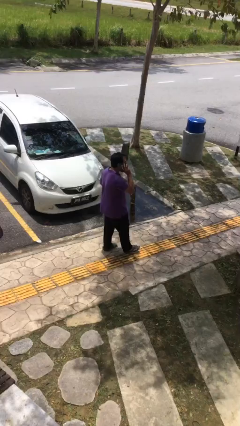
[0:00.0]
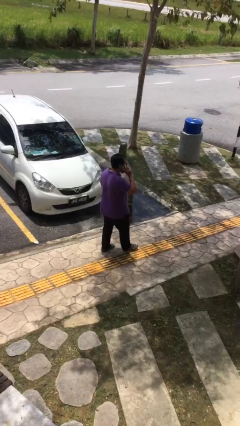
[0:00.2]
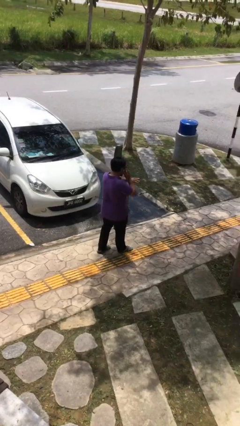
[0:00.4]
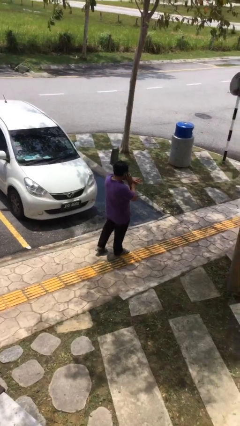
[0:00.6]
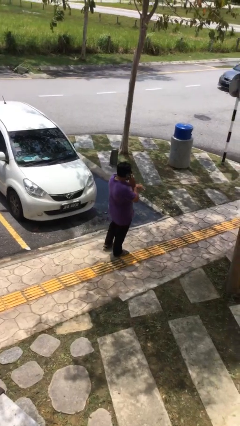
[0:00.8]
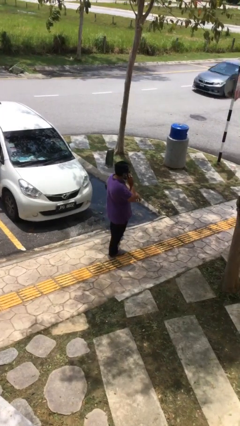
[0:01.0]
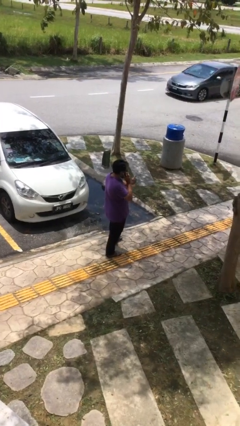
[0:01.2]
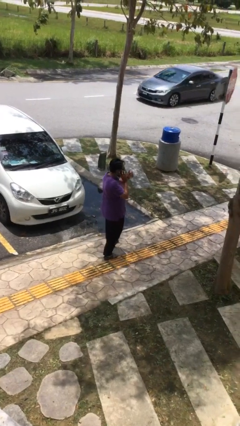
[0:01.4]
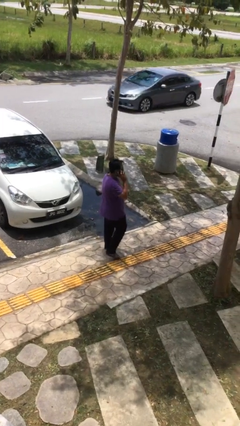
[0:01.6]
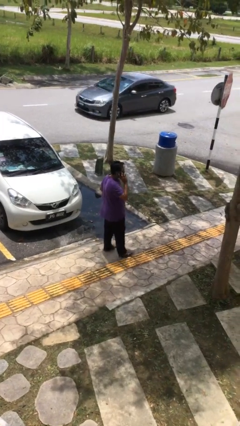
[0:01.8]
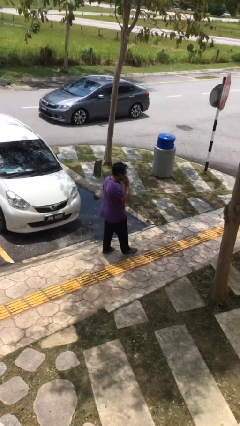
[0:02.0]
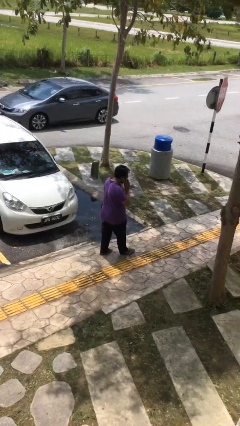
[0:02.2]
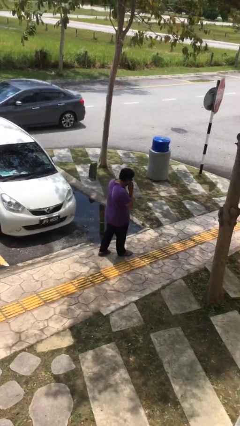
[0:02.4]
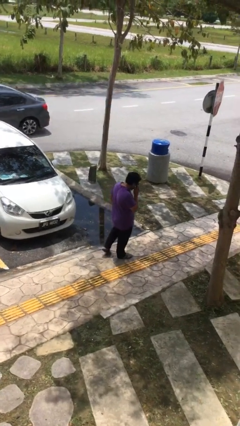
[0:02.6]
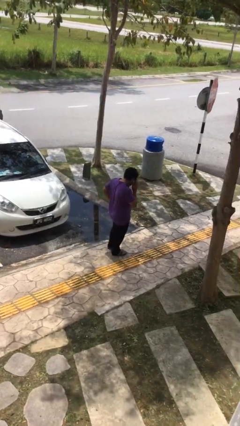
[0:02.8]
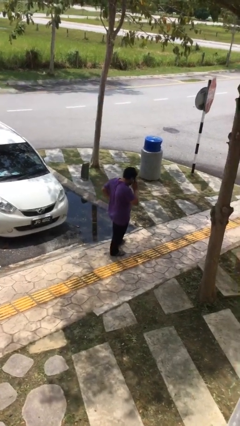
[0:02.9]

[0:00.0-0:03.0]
person talks on phone

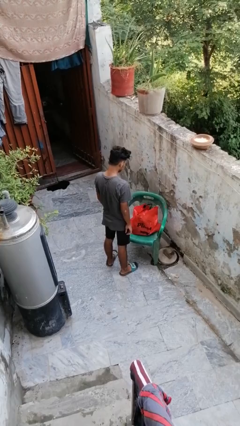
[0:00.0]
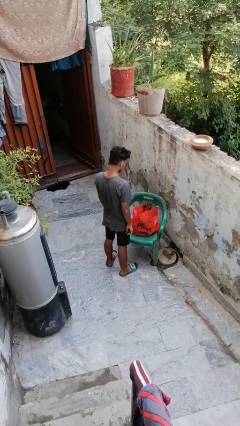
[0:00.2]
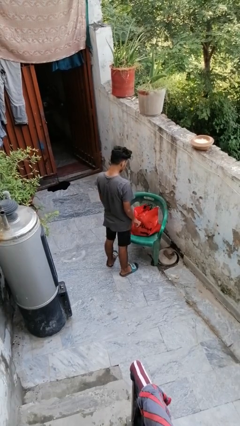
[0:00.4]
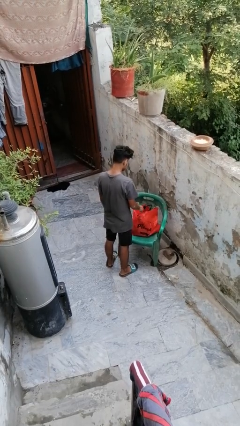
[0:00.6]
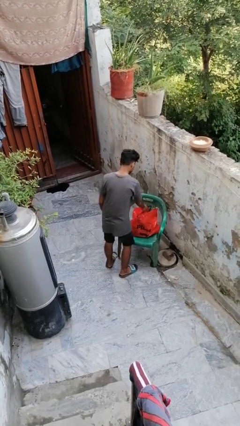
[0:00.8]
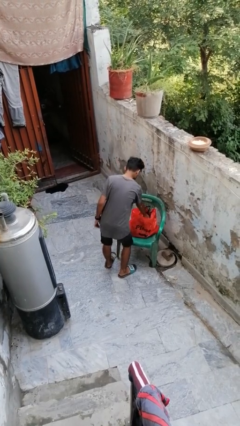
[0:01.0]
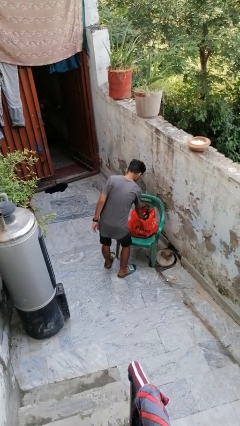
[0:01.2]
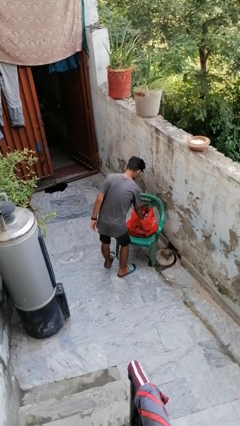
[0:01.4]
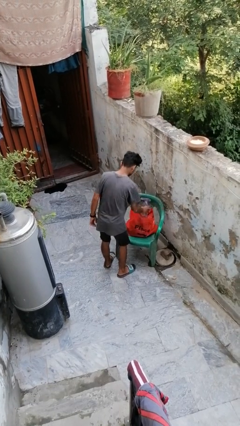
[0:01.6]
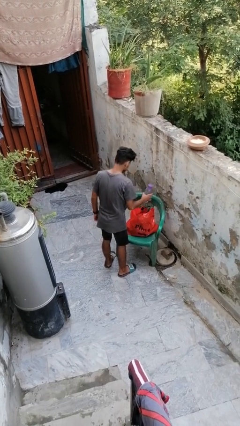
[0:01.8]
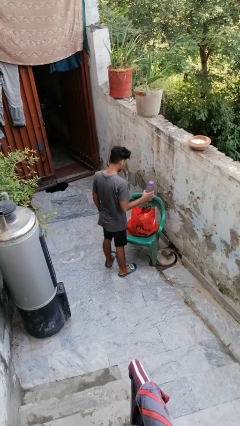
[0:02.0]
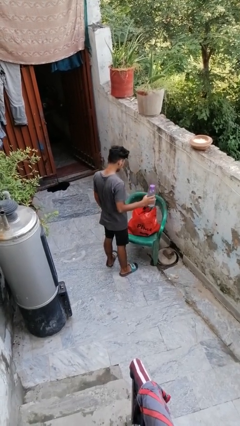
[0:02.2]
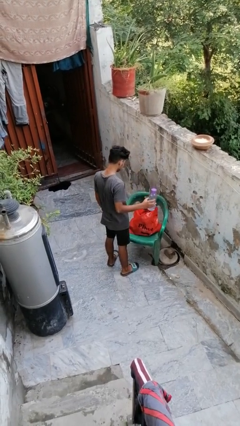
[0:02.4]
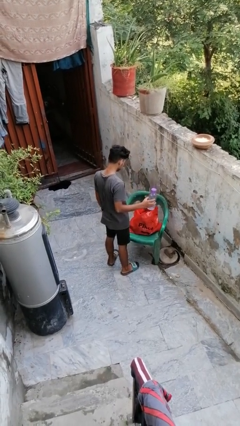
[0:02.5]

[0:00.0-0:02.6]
person takes object from bag

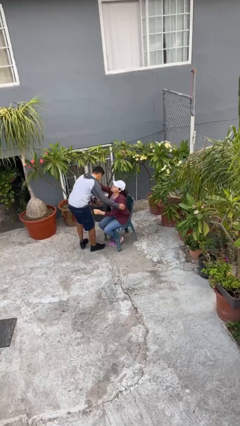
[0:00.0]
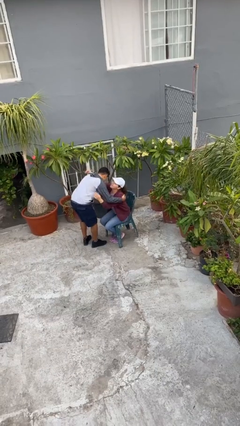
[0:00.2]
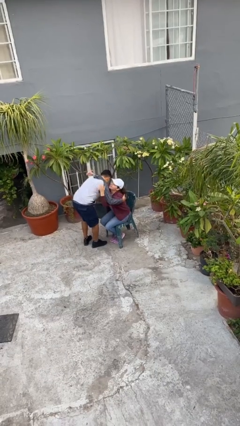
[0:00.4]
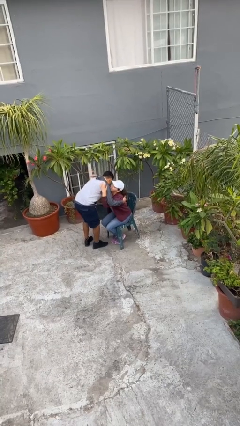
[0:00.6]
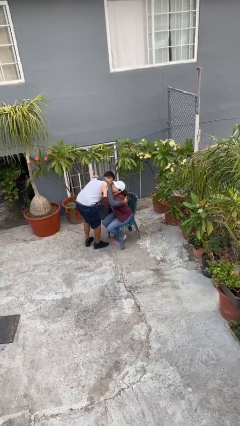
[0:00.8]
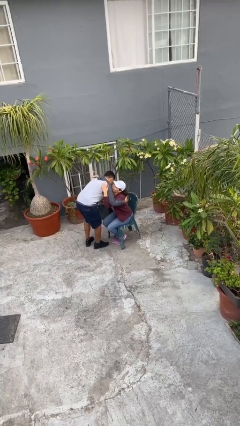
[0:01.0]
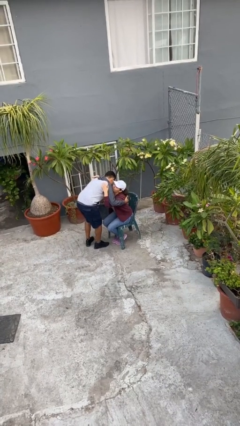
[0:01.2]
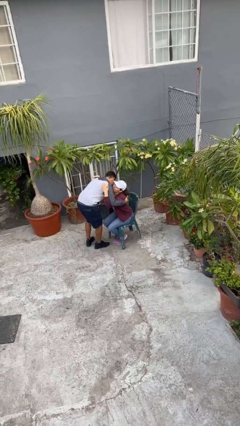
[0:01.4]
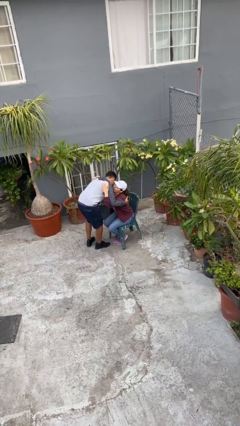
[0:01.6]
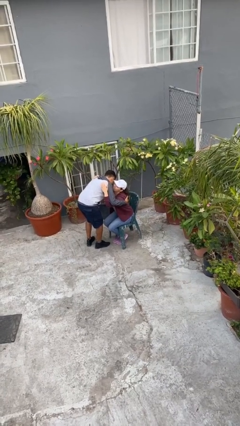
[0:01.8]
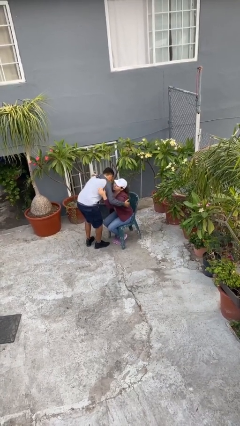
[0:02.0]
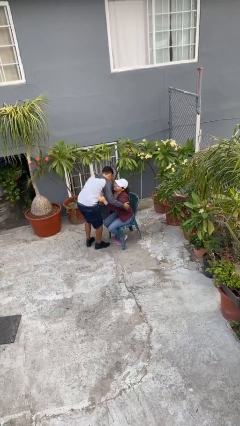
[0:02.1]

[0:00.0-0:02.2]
person embraces person

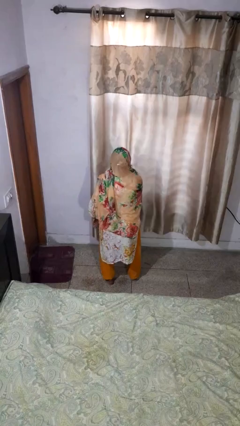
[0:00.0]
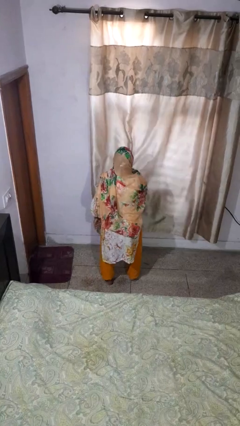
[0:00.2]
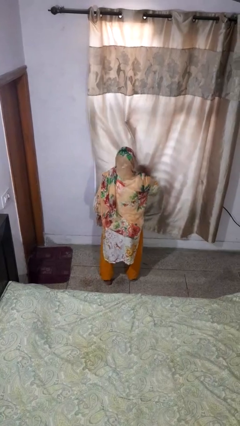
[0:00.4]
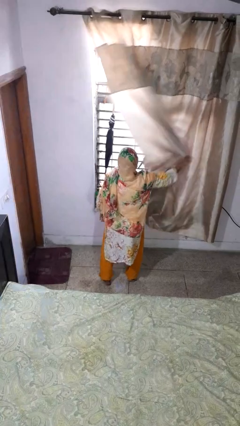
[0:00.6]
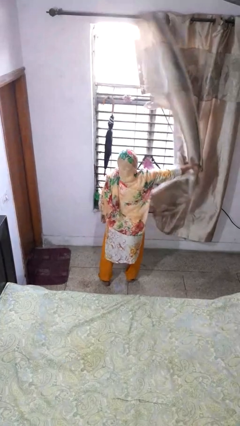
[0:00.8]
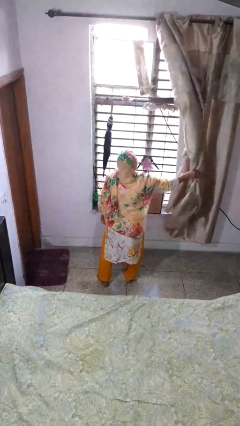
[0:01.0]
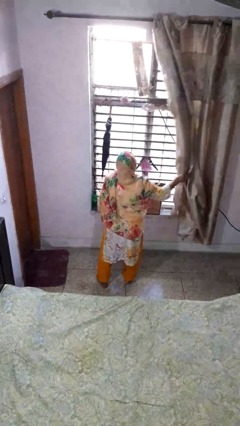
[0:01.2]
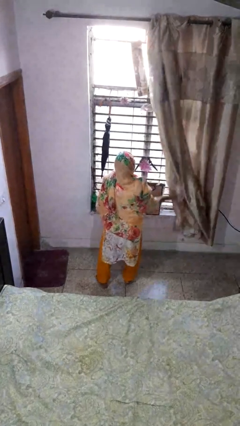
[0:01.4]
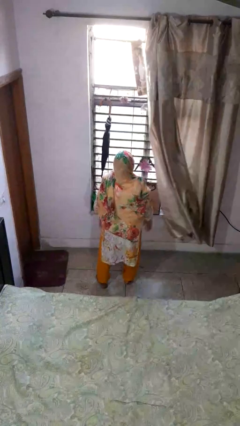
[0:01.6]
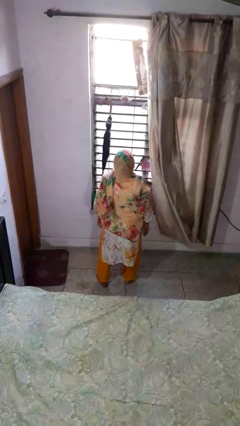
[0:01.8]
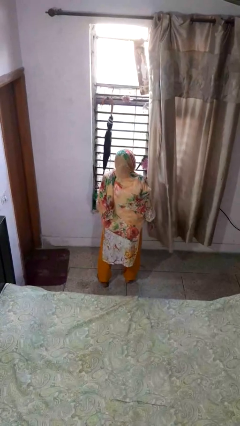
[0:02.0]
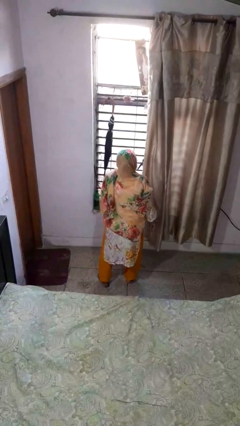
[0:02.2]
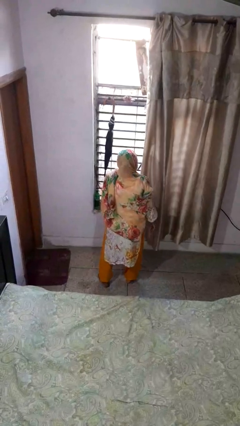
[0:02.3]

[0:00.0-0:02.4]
person opens curtains

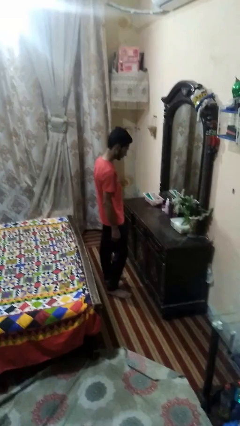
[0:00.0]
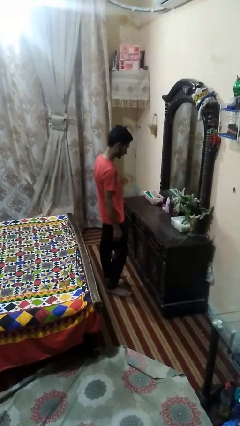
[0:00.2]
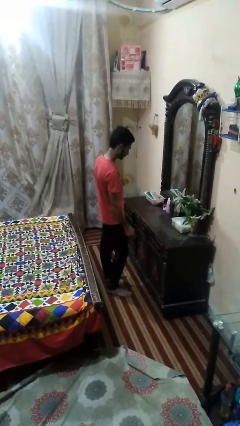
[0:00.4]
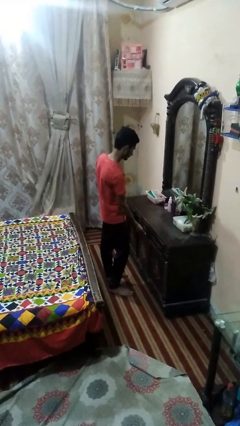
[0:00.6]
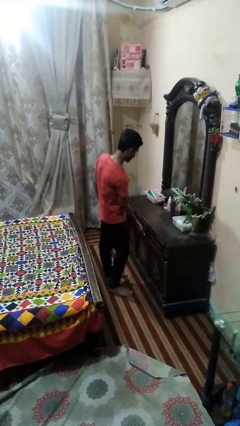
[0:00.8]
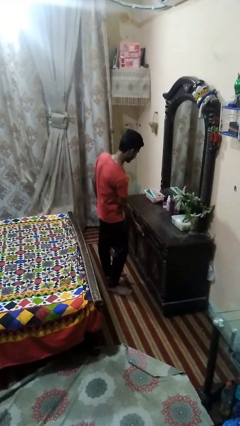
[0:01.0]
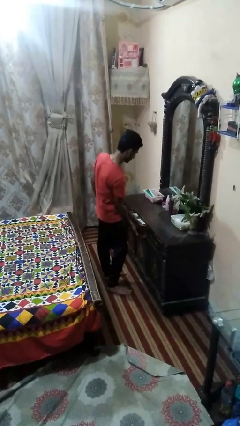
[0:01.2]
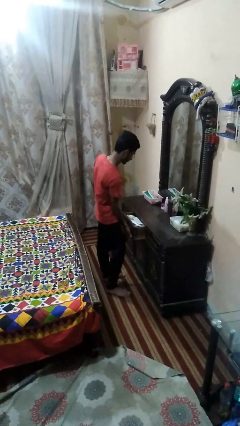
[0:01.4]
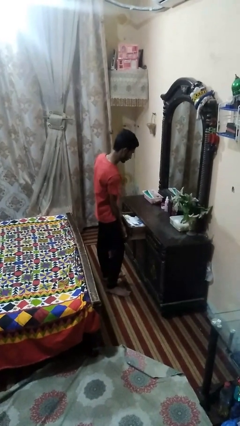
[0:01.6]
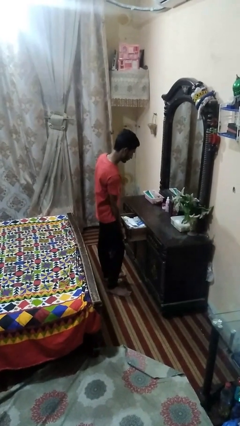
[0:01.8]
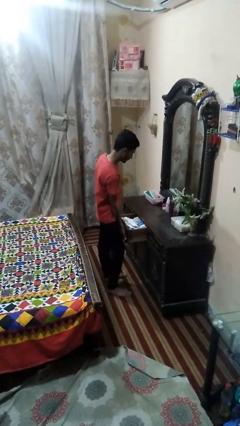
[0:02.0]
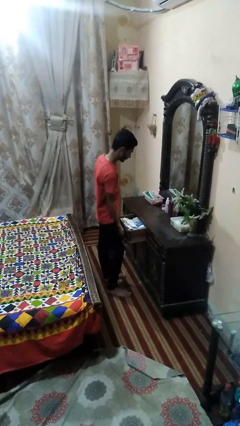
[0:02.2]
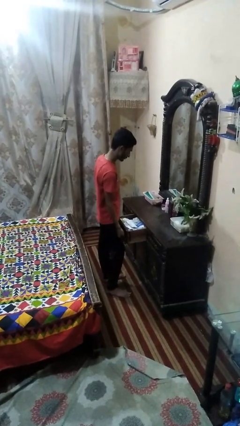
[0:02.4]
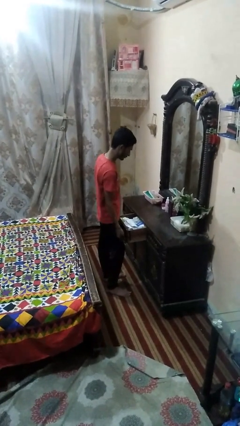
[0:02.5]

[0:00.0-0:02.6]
person opens dresser drawer

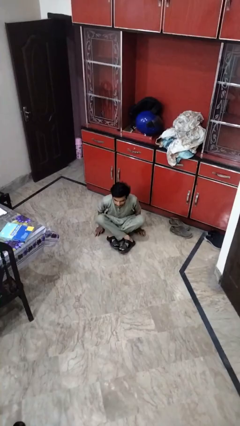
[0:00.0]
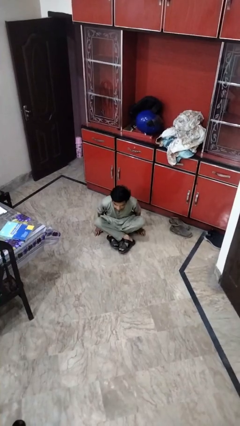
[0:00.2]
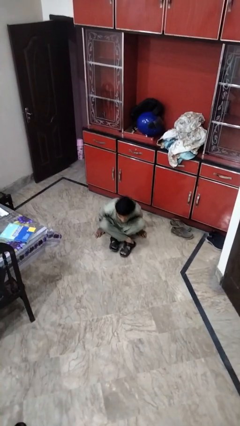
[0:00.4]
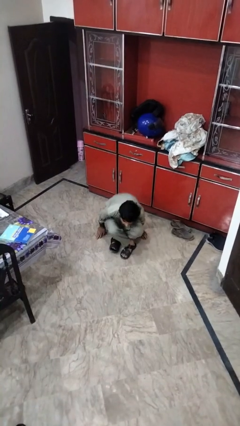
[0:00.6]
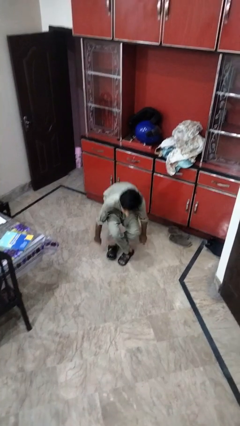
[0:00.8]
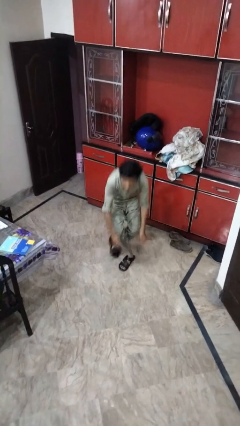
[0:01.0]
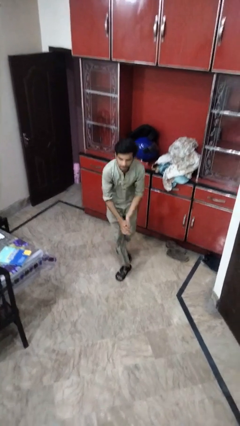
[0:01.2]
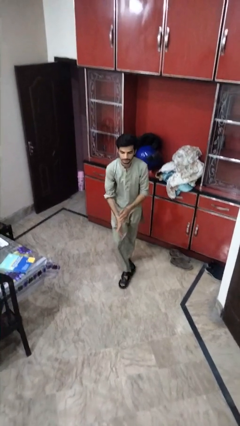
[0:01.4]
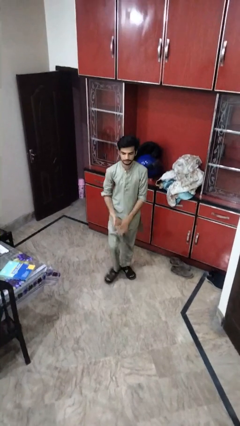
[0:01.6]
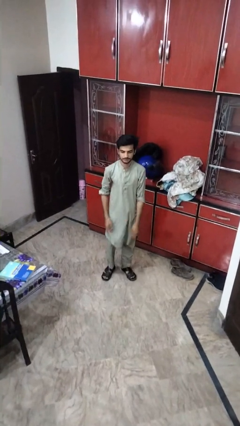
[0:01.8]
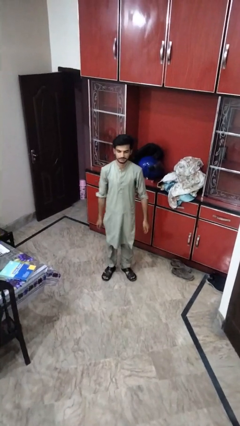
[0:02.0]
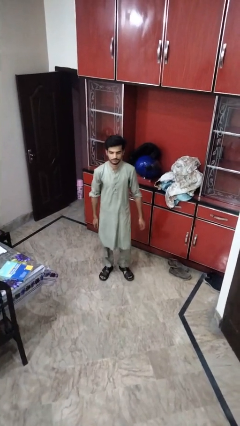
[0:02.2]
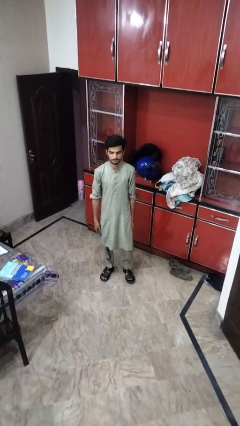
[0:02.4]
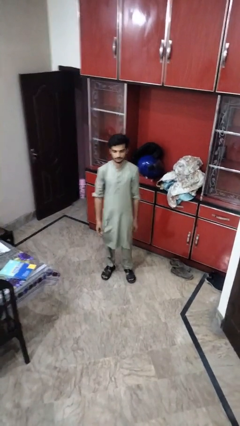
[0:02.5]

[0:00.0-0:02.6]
person stands up from floor

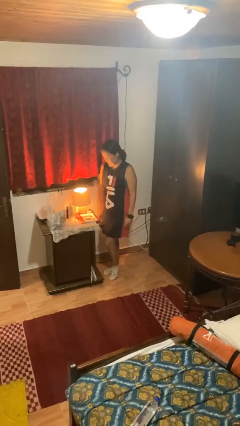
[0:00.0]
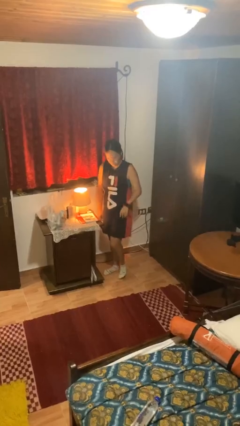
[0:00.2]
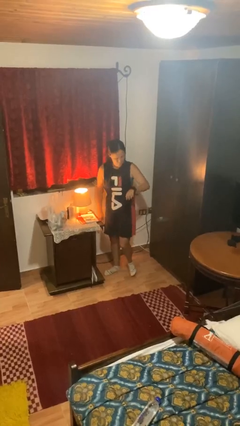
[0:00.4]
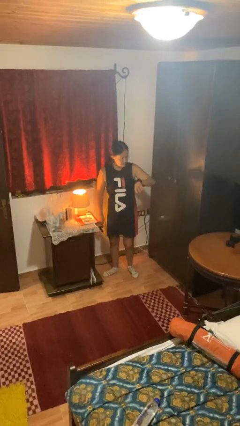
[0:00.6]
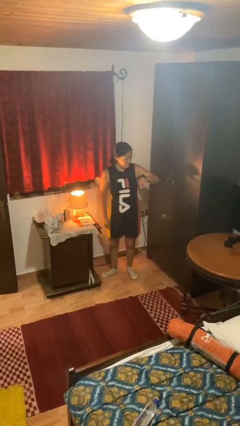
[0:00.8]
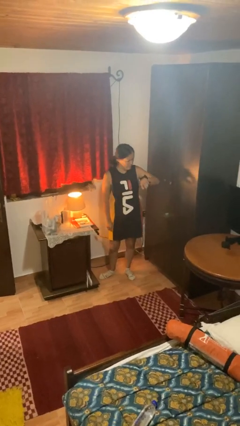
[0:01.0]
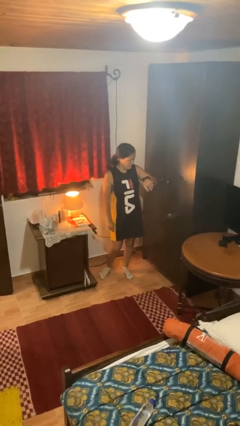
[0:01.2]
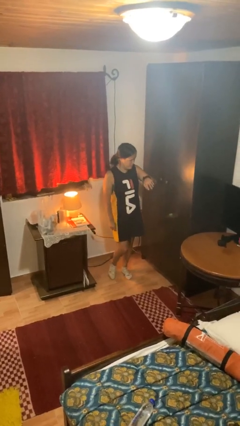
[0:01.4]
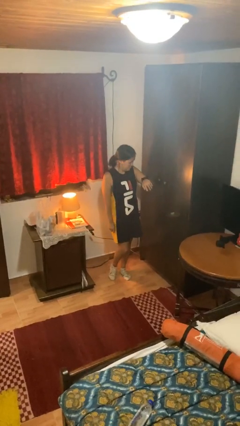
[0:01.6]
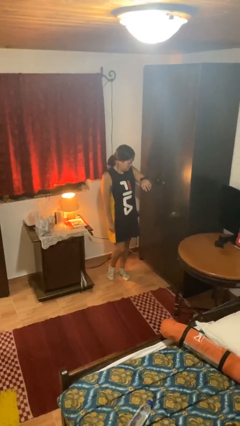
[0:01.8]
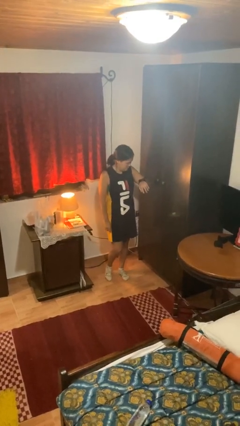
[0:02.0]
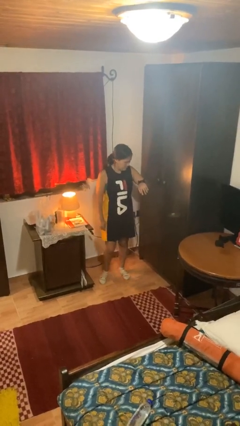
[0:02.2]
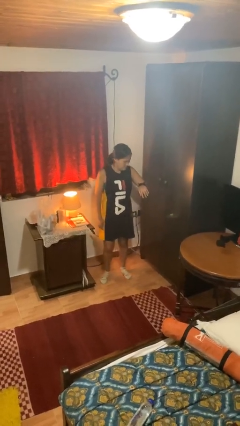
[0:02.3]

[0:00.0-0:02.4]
person looks at wristwatch
